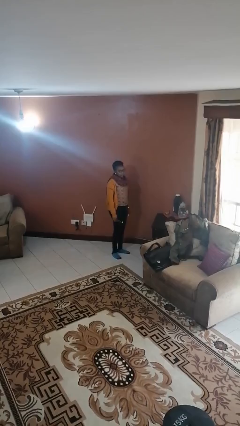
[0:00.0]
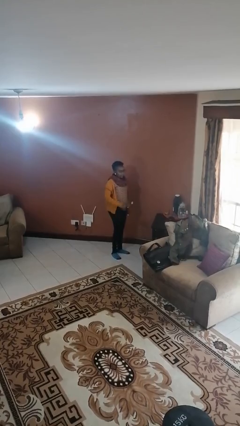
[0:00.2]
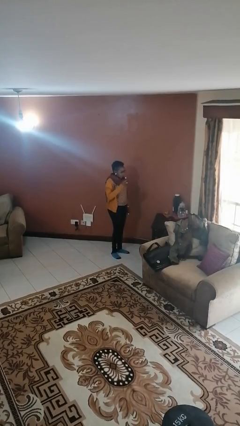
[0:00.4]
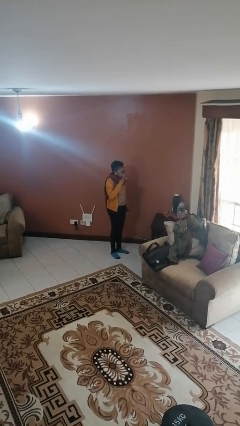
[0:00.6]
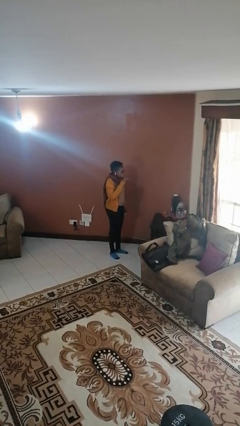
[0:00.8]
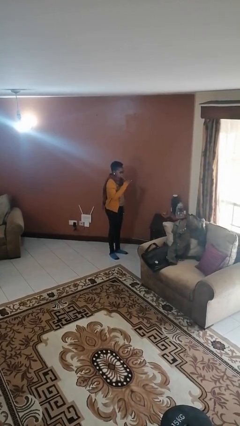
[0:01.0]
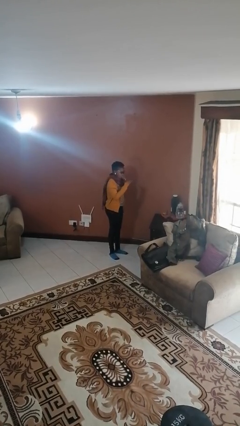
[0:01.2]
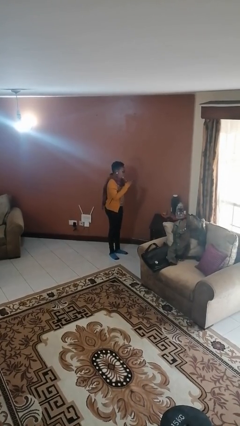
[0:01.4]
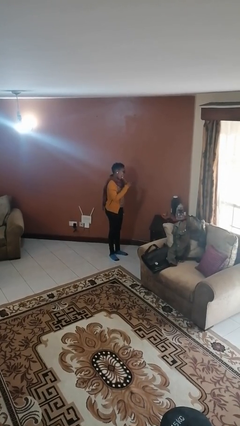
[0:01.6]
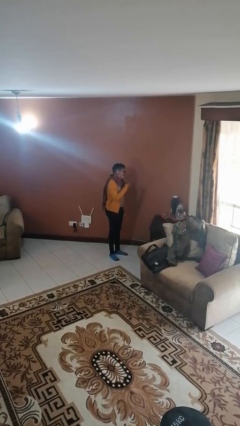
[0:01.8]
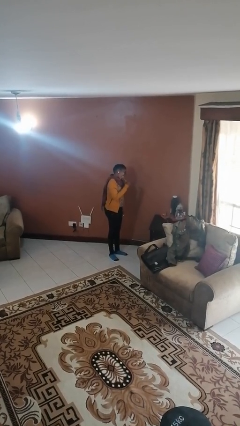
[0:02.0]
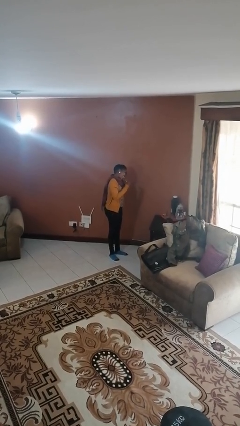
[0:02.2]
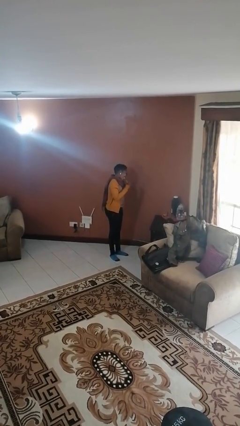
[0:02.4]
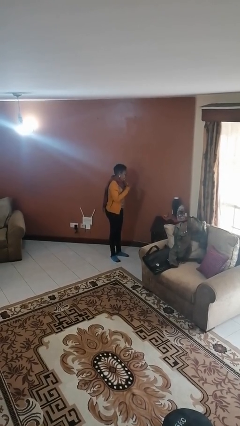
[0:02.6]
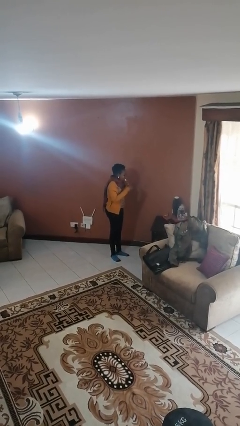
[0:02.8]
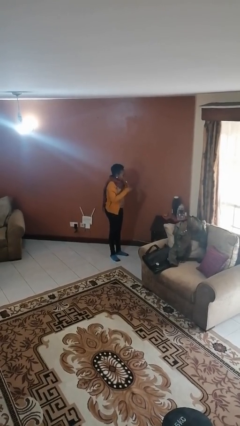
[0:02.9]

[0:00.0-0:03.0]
person brushes teeth

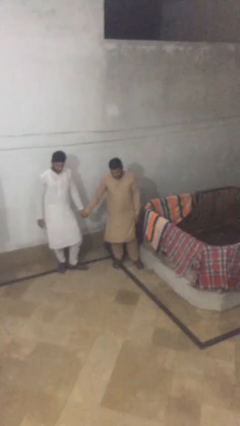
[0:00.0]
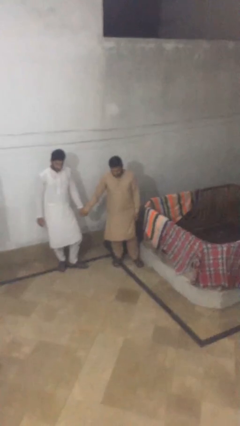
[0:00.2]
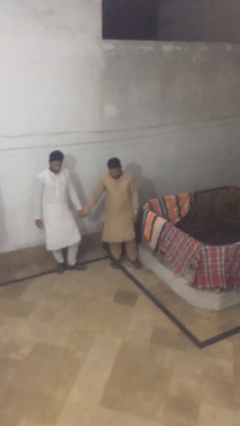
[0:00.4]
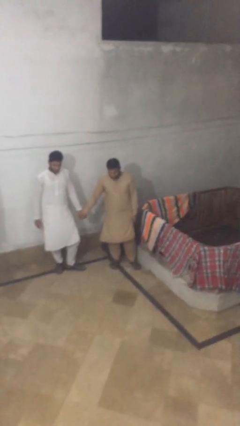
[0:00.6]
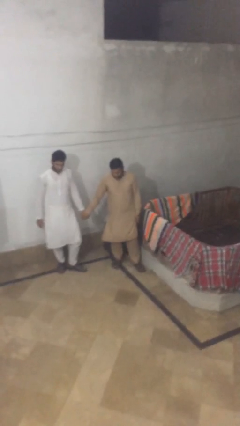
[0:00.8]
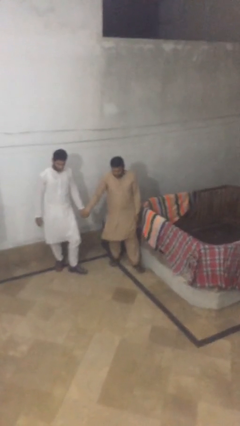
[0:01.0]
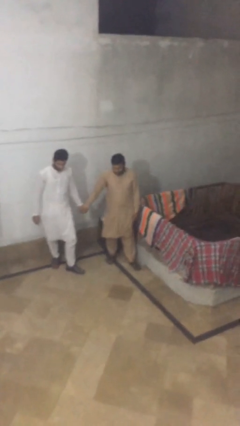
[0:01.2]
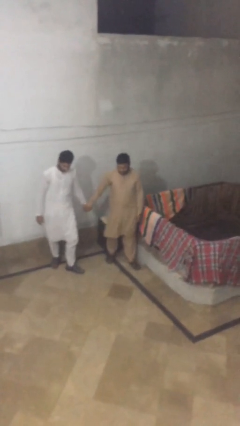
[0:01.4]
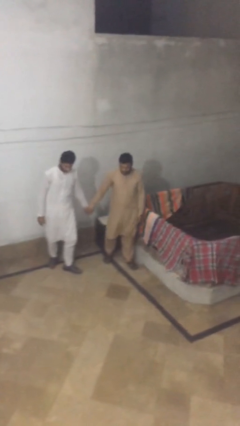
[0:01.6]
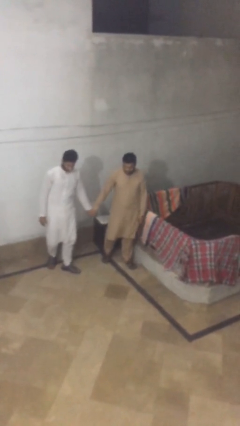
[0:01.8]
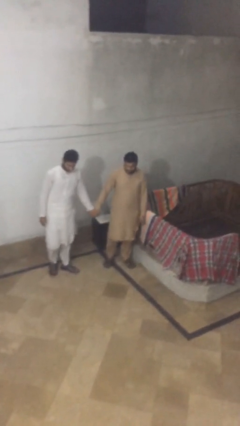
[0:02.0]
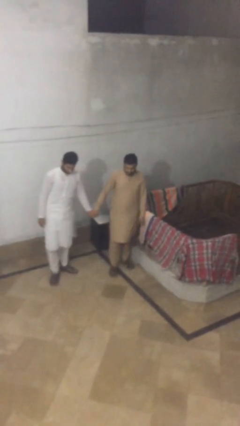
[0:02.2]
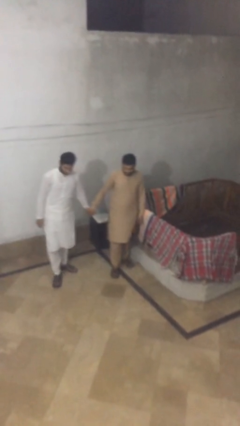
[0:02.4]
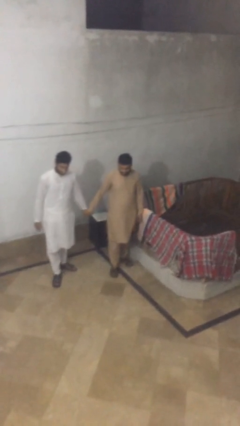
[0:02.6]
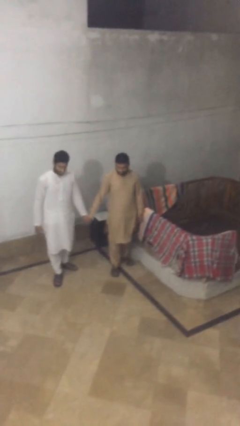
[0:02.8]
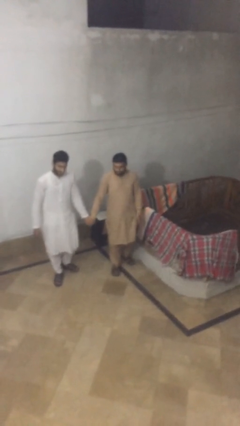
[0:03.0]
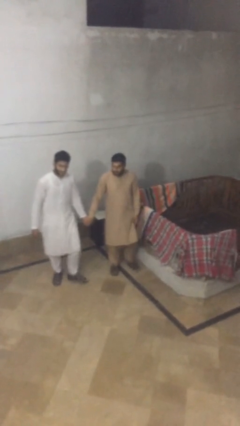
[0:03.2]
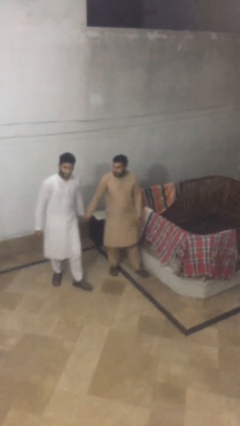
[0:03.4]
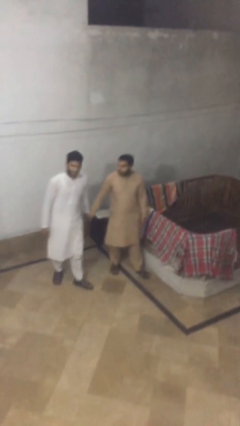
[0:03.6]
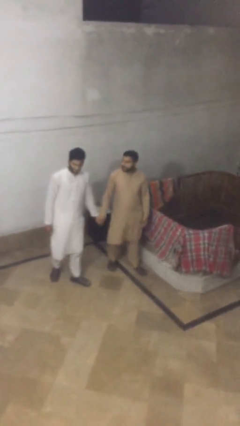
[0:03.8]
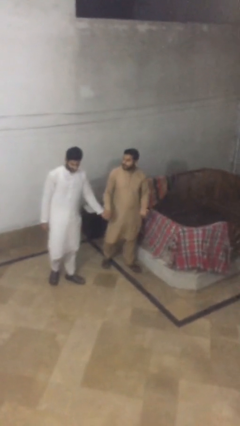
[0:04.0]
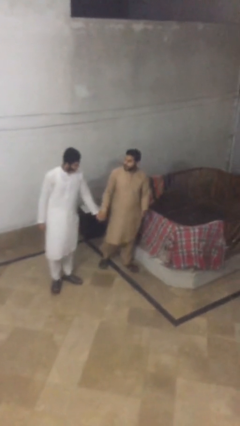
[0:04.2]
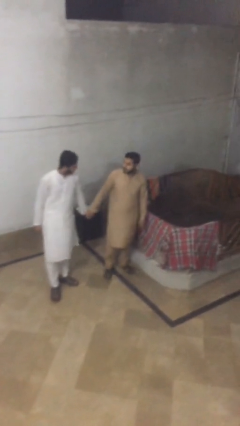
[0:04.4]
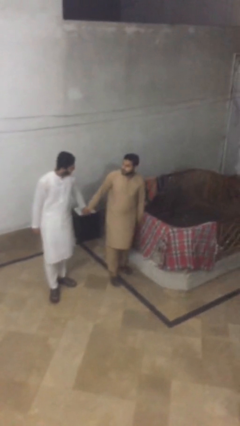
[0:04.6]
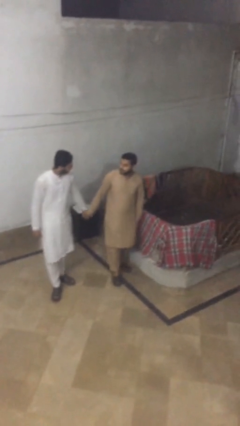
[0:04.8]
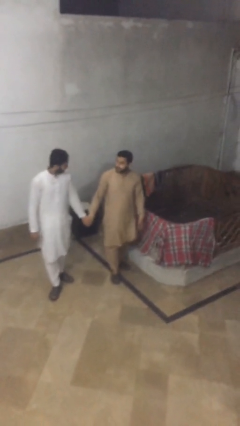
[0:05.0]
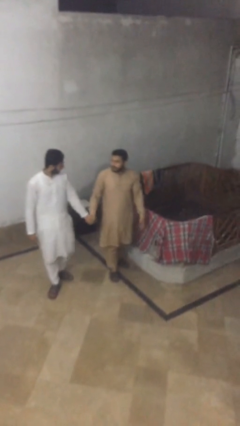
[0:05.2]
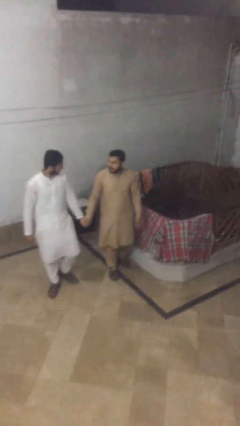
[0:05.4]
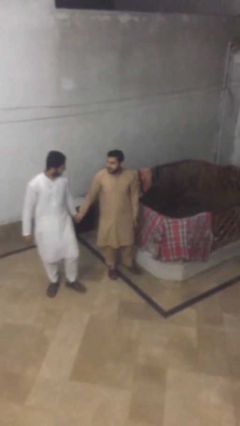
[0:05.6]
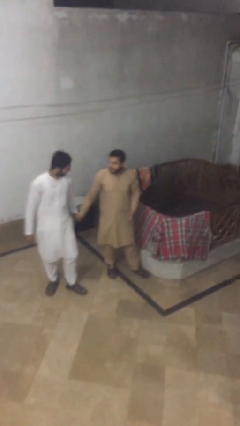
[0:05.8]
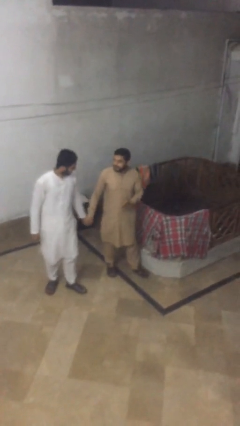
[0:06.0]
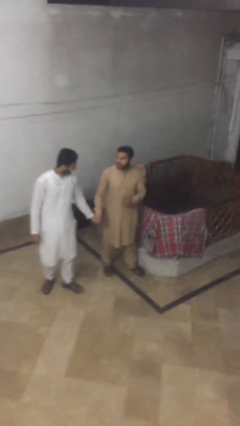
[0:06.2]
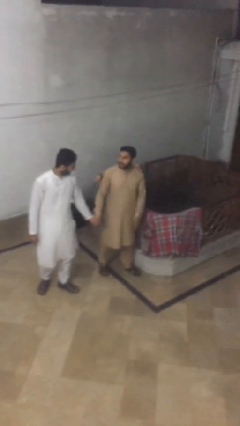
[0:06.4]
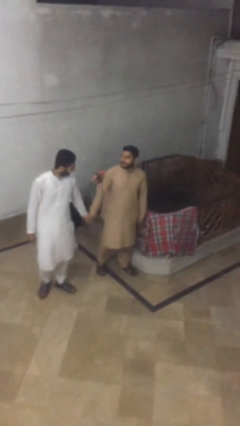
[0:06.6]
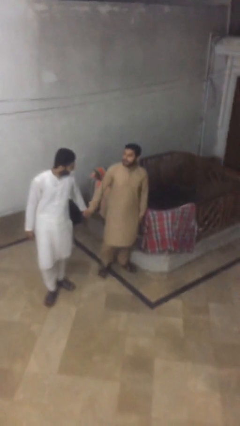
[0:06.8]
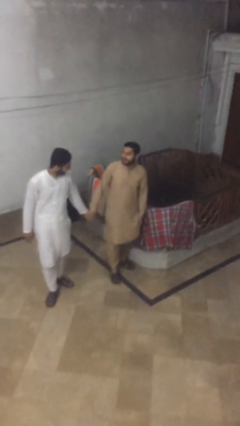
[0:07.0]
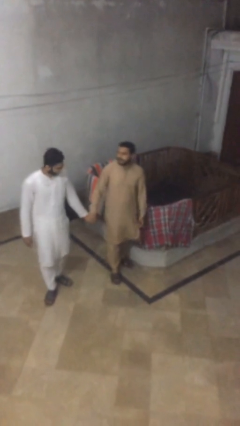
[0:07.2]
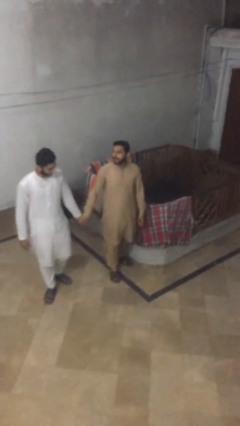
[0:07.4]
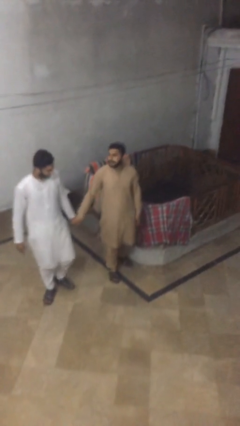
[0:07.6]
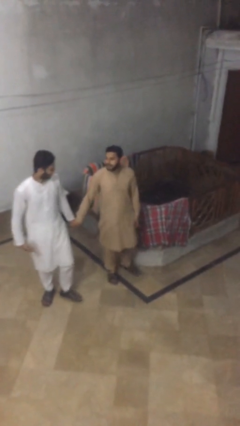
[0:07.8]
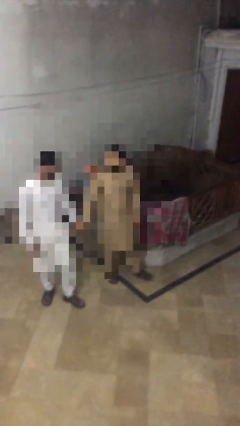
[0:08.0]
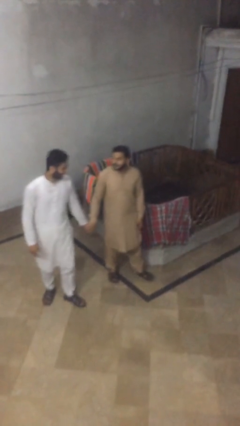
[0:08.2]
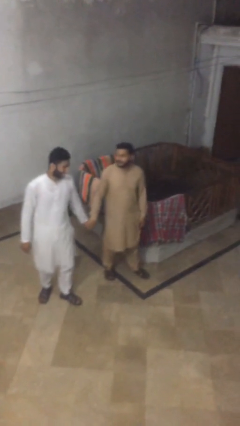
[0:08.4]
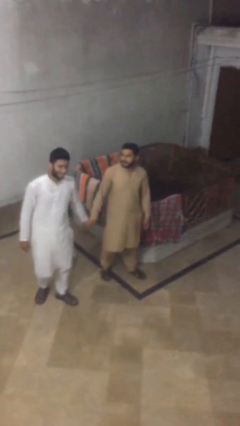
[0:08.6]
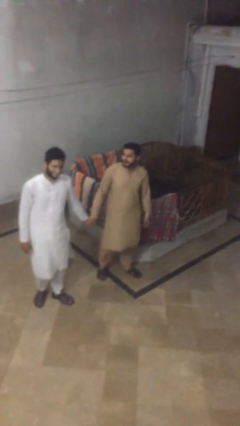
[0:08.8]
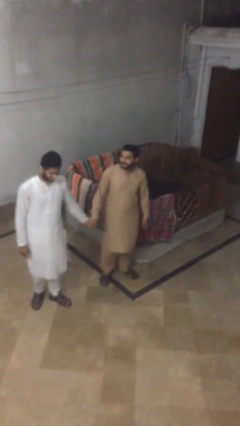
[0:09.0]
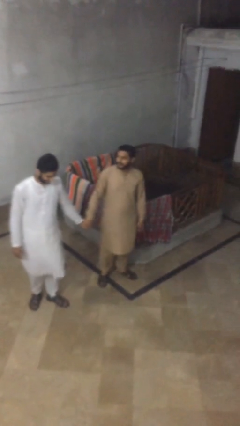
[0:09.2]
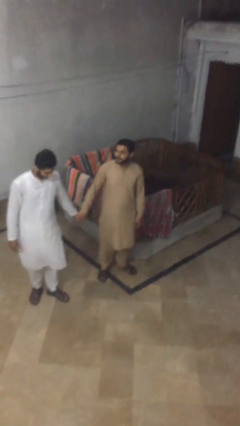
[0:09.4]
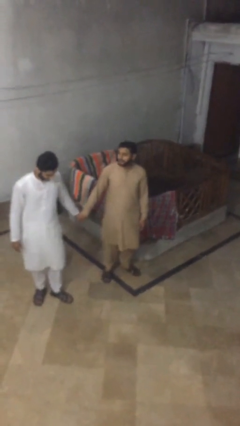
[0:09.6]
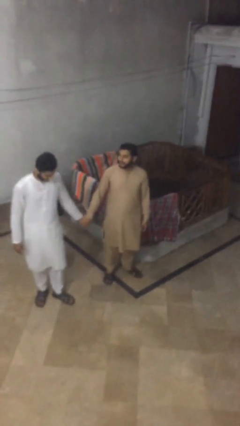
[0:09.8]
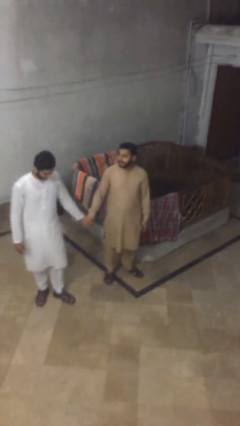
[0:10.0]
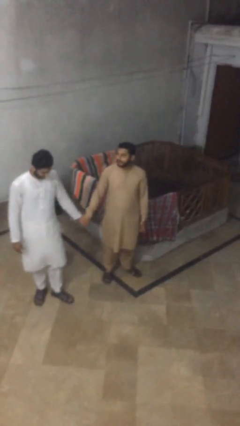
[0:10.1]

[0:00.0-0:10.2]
person holds hand

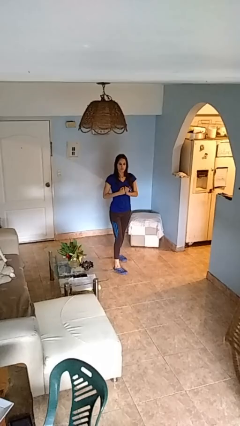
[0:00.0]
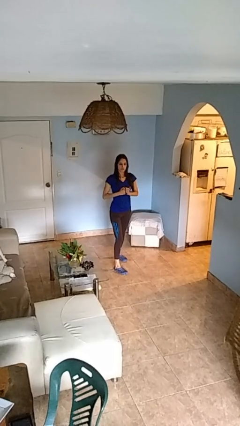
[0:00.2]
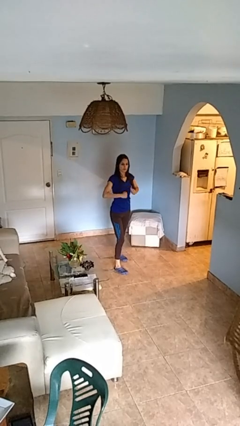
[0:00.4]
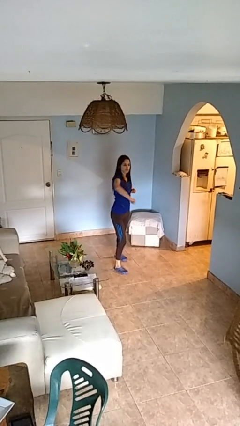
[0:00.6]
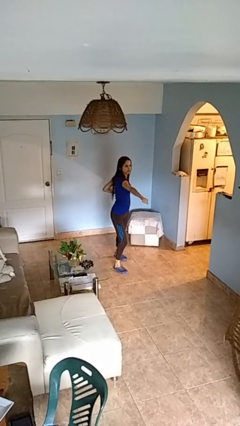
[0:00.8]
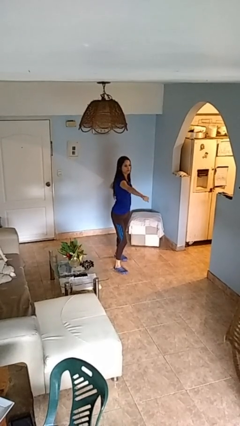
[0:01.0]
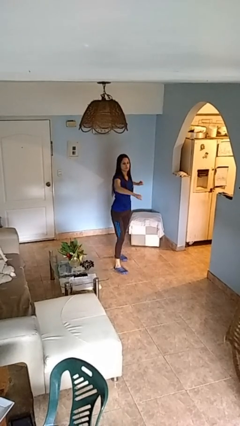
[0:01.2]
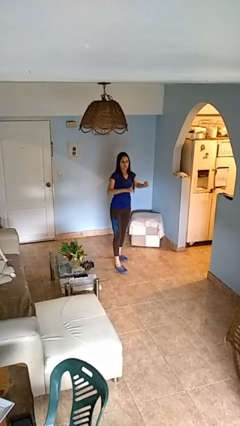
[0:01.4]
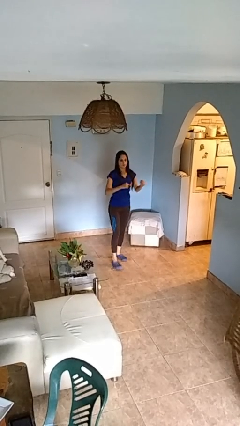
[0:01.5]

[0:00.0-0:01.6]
person karate chop

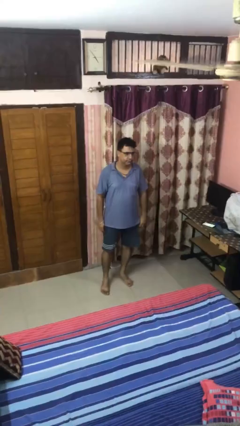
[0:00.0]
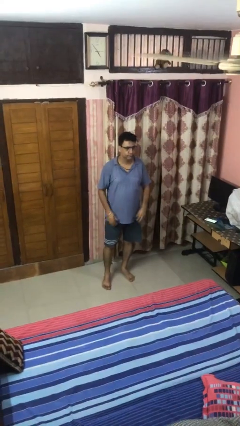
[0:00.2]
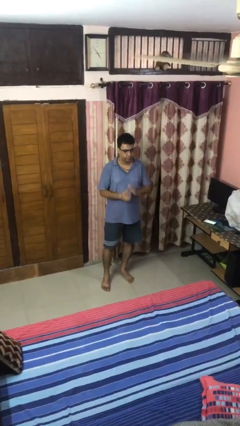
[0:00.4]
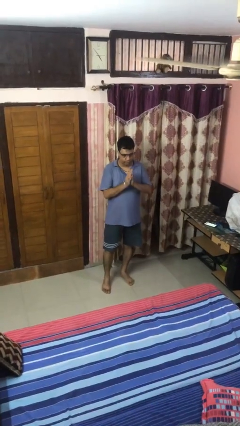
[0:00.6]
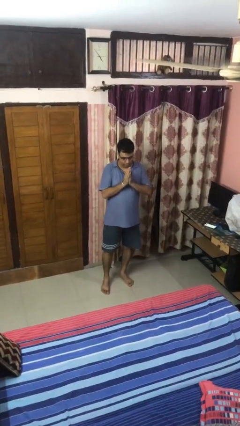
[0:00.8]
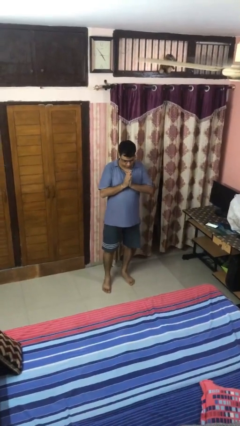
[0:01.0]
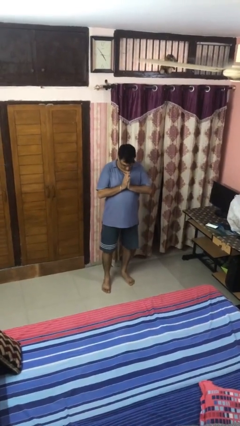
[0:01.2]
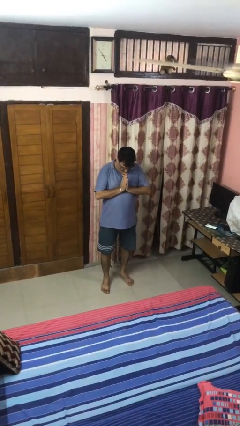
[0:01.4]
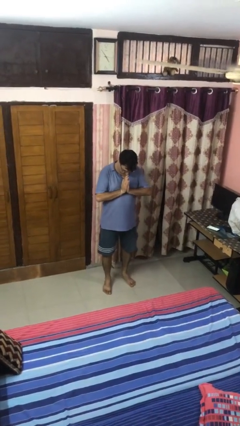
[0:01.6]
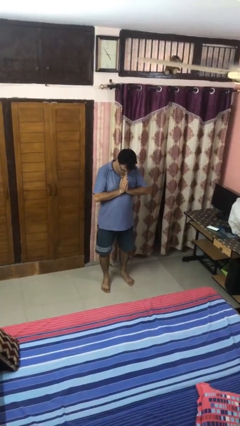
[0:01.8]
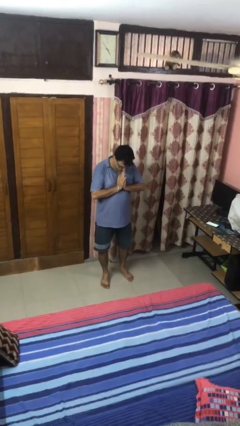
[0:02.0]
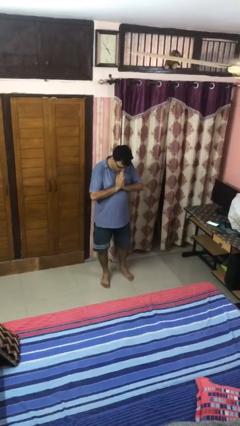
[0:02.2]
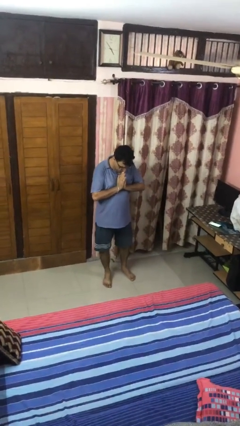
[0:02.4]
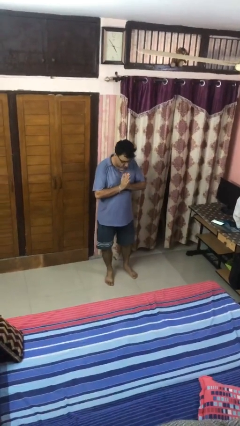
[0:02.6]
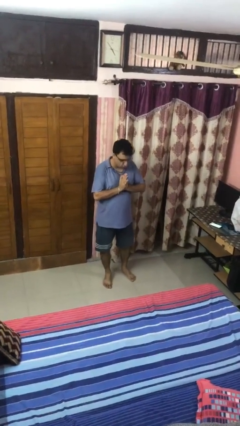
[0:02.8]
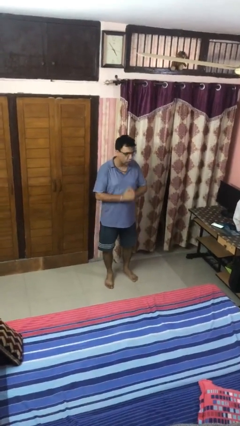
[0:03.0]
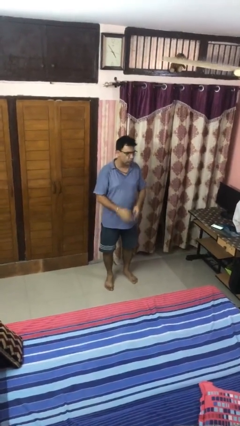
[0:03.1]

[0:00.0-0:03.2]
person prays
